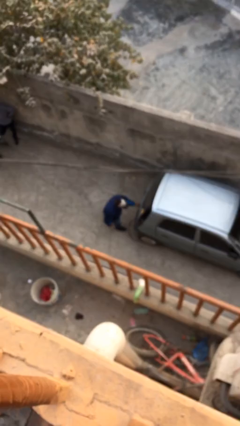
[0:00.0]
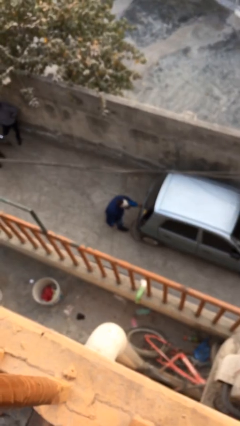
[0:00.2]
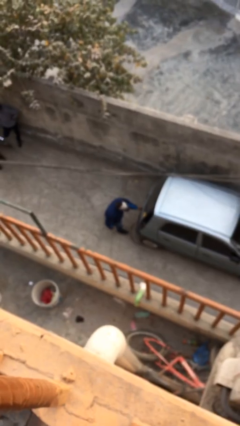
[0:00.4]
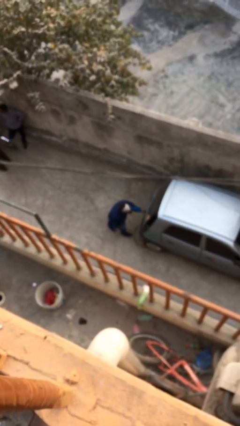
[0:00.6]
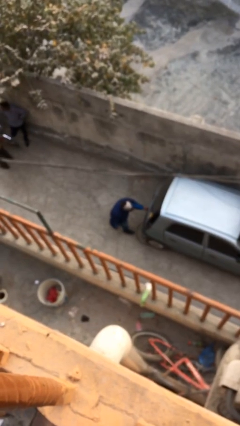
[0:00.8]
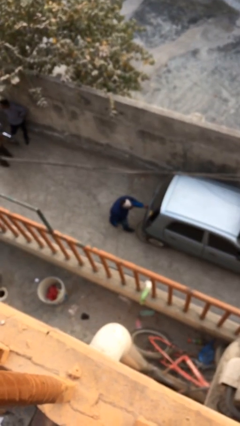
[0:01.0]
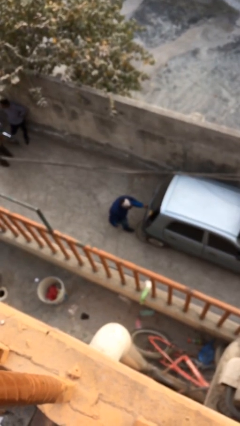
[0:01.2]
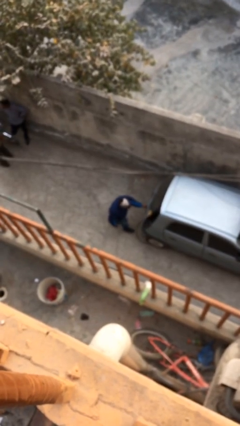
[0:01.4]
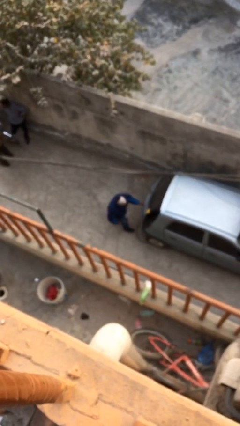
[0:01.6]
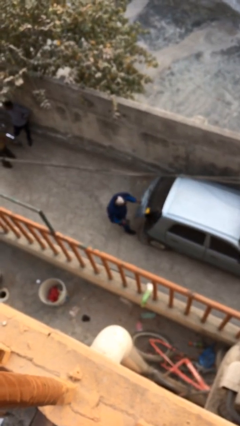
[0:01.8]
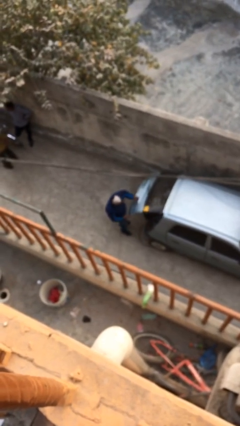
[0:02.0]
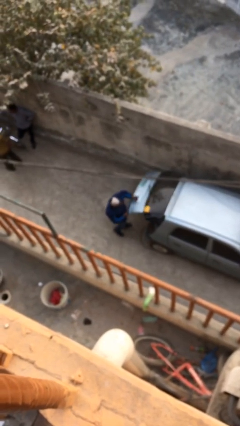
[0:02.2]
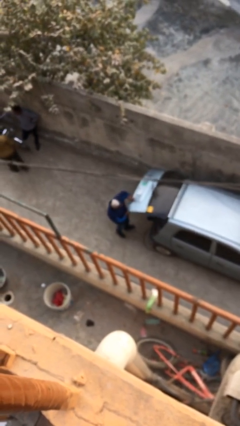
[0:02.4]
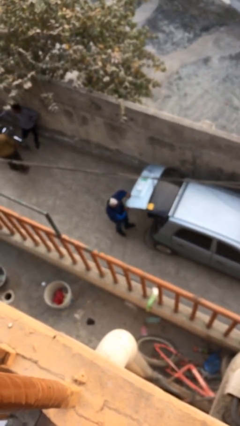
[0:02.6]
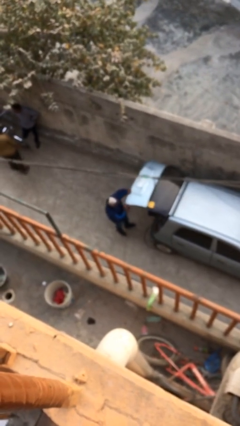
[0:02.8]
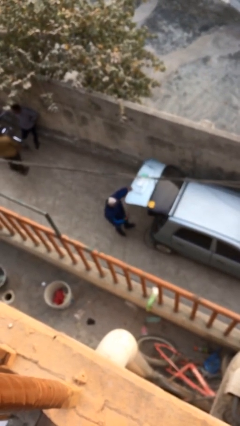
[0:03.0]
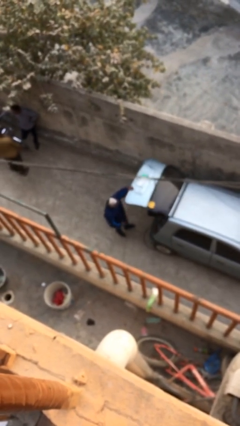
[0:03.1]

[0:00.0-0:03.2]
person opens car trunk

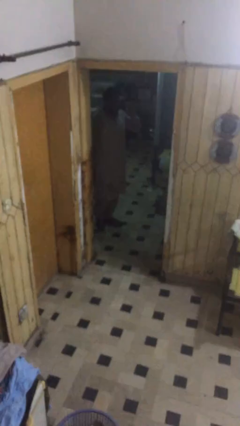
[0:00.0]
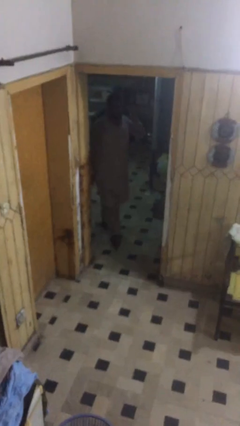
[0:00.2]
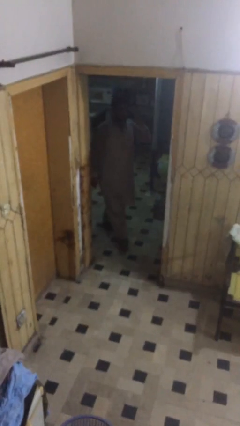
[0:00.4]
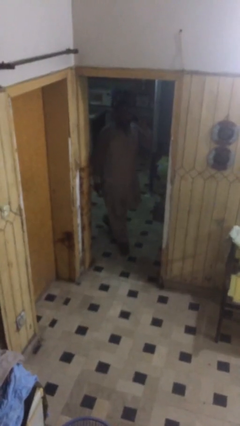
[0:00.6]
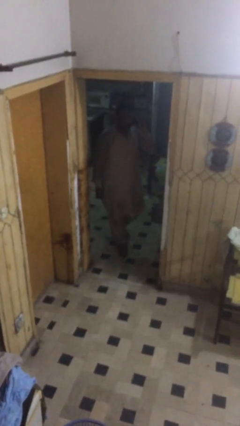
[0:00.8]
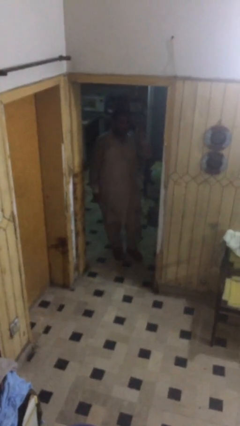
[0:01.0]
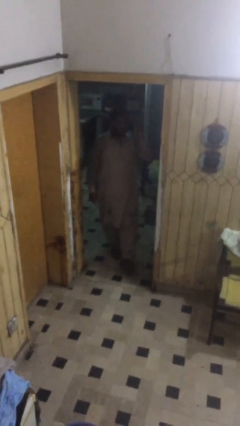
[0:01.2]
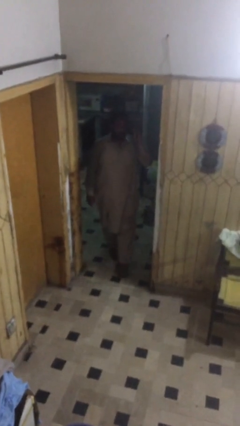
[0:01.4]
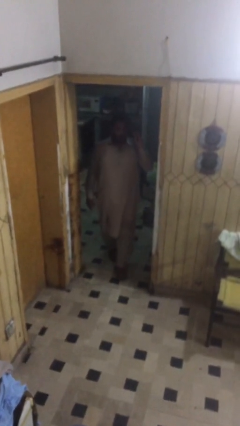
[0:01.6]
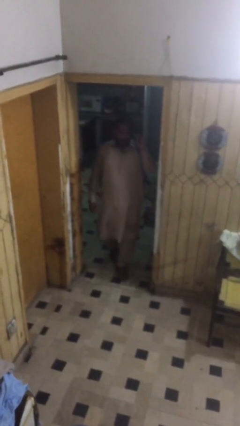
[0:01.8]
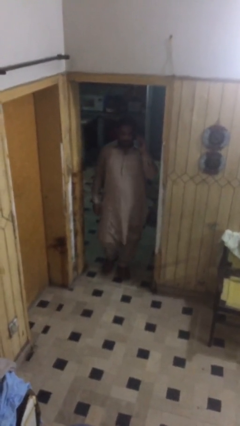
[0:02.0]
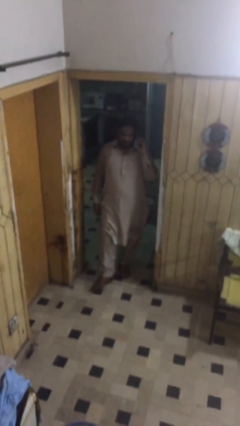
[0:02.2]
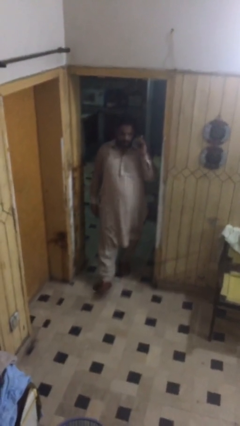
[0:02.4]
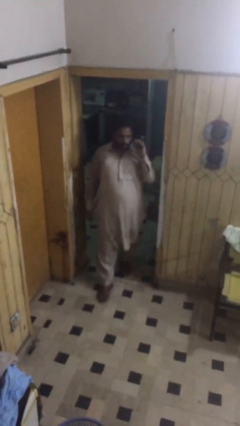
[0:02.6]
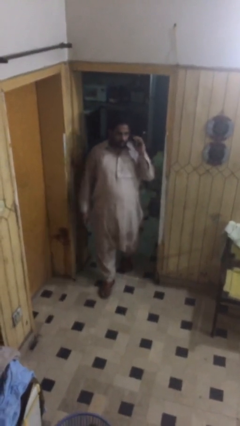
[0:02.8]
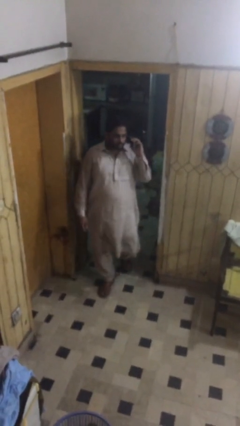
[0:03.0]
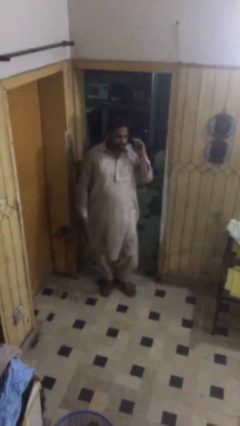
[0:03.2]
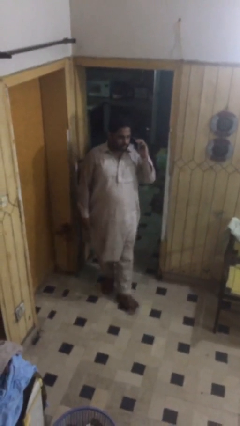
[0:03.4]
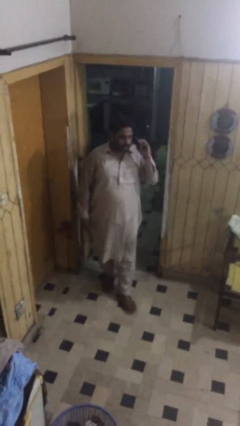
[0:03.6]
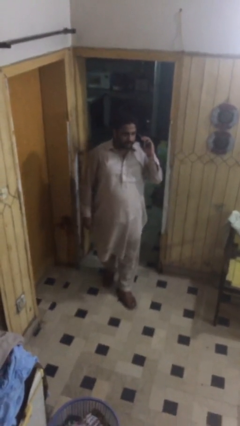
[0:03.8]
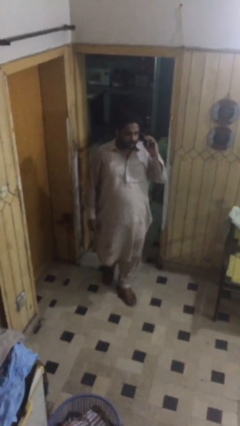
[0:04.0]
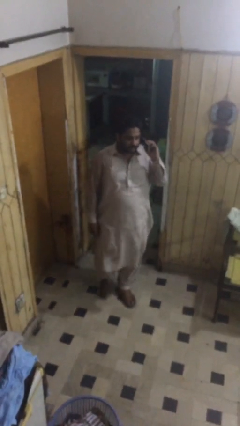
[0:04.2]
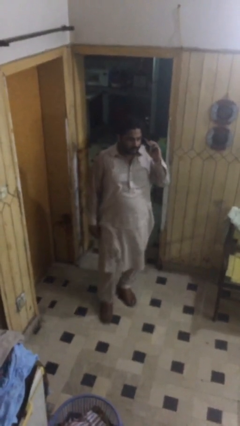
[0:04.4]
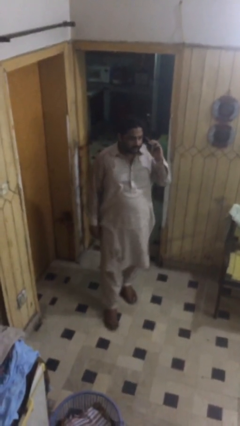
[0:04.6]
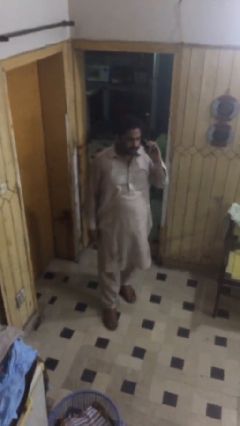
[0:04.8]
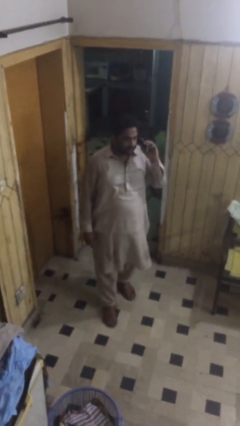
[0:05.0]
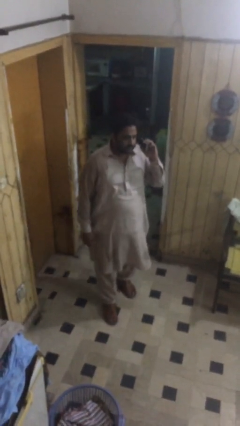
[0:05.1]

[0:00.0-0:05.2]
person enters scene through structure

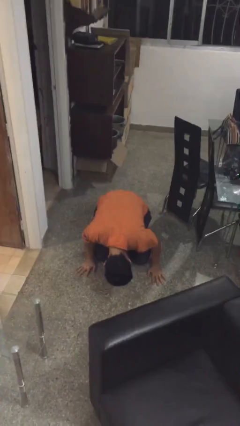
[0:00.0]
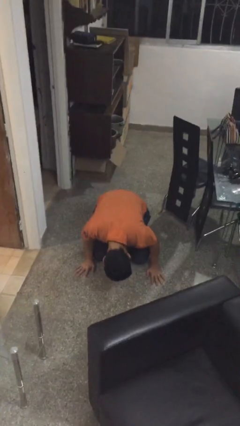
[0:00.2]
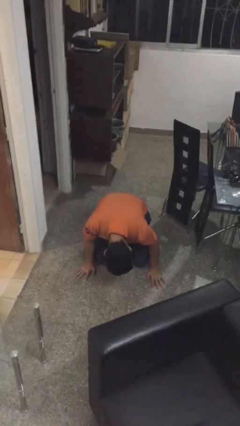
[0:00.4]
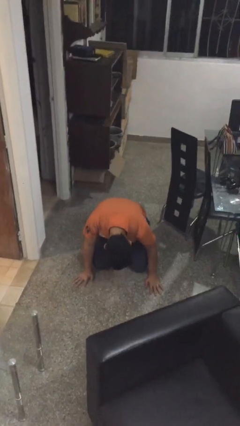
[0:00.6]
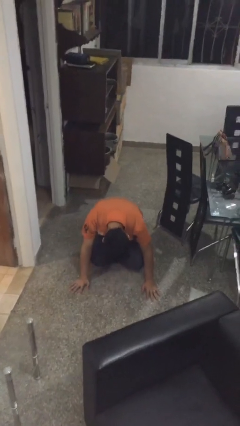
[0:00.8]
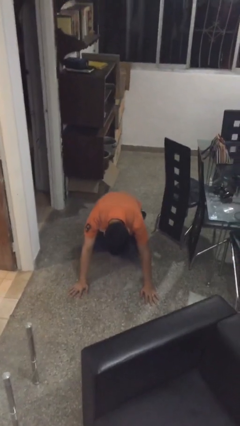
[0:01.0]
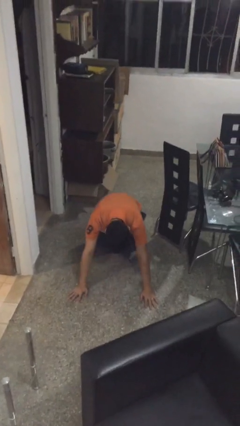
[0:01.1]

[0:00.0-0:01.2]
person lies down on floor

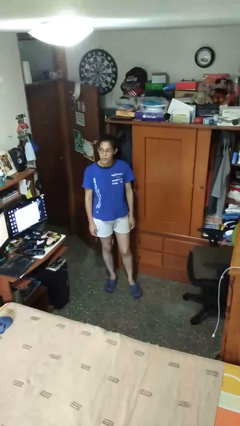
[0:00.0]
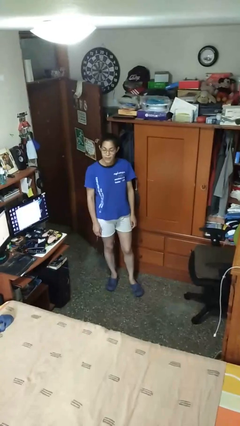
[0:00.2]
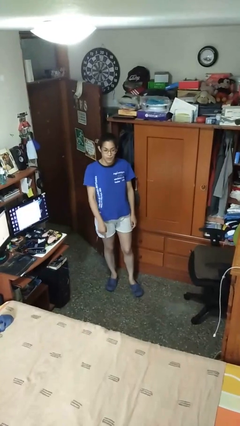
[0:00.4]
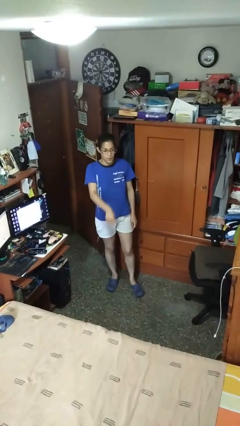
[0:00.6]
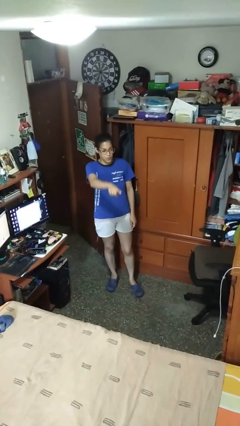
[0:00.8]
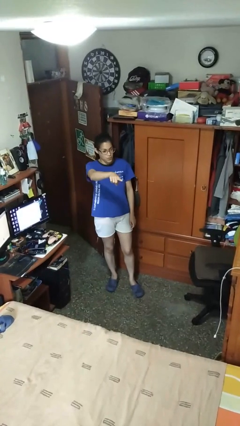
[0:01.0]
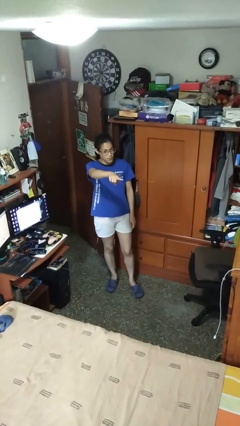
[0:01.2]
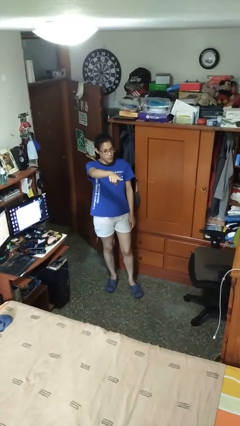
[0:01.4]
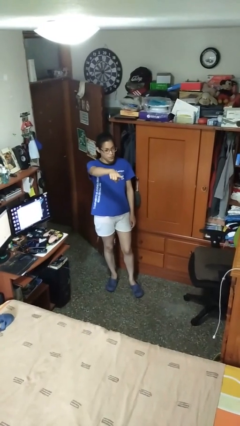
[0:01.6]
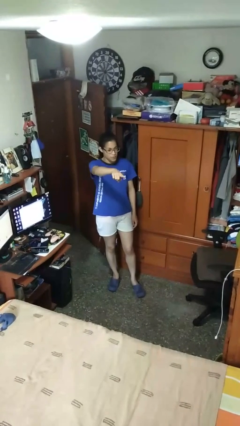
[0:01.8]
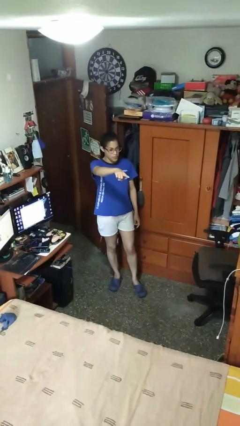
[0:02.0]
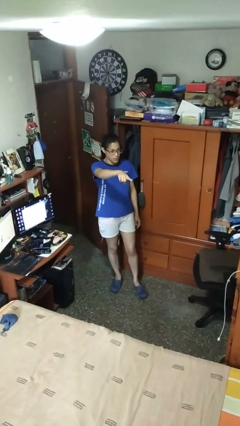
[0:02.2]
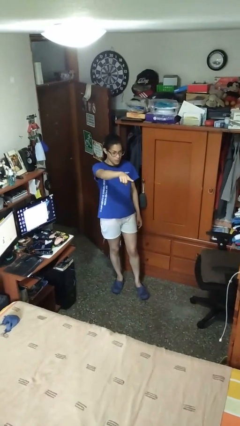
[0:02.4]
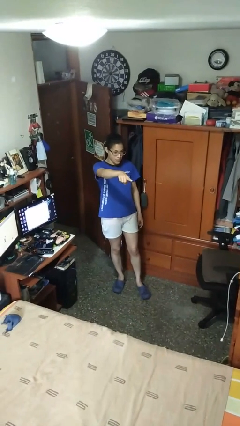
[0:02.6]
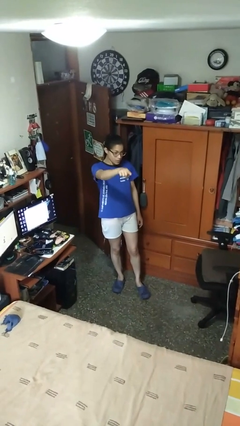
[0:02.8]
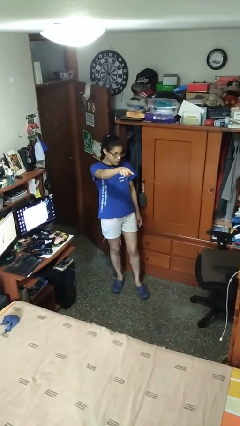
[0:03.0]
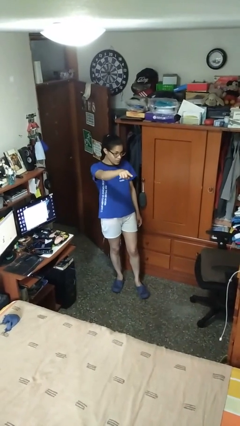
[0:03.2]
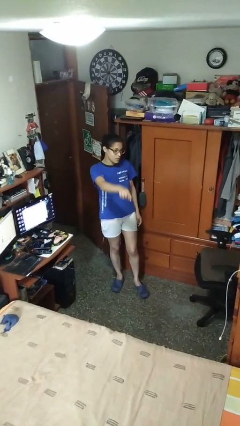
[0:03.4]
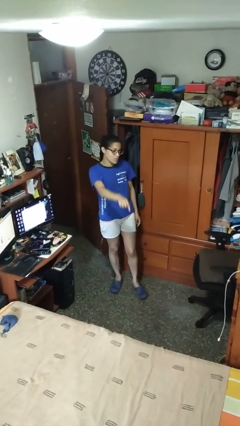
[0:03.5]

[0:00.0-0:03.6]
person points at person

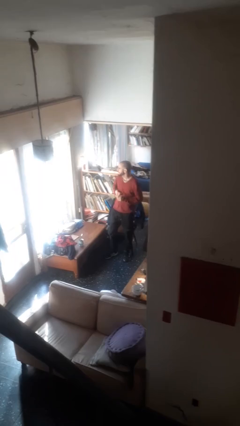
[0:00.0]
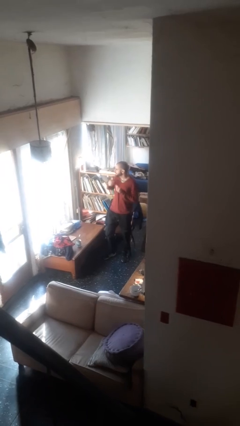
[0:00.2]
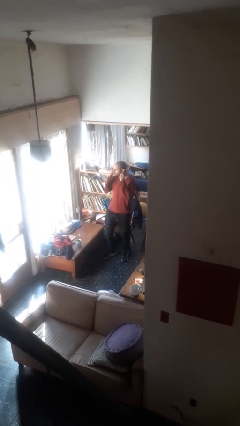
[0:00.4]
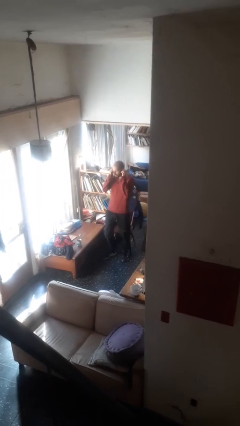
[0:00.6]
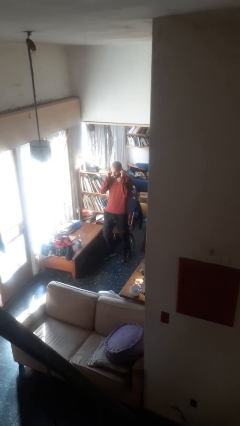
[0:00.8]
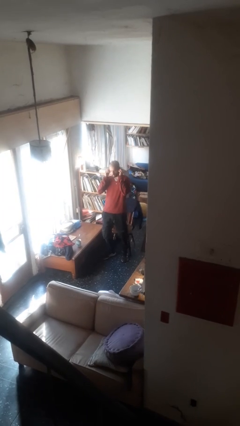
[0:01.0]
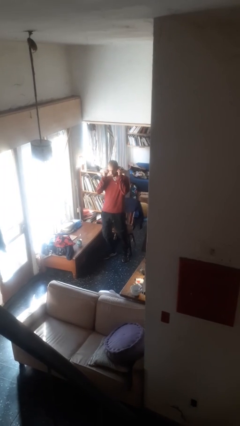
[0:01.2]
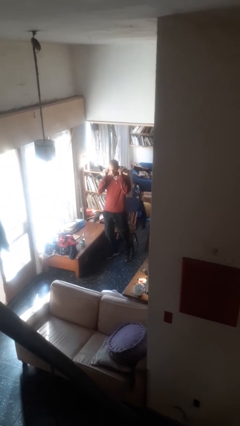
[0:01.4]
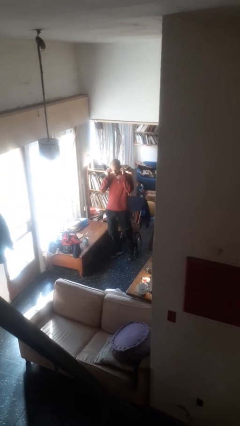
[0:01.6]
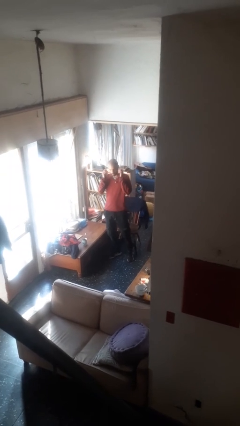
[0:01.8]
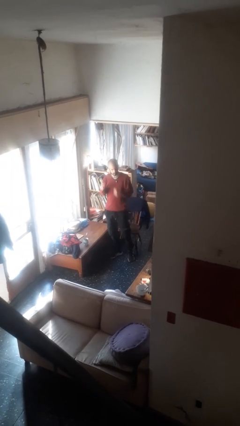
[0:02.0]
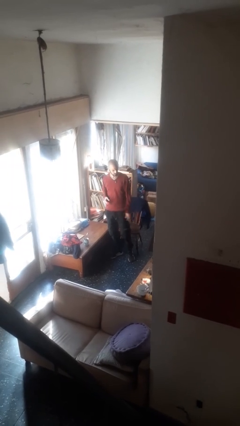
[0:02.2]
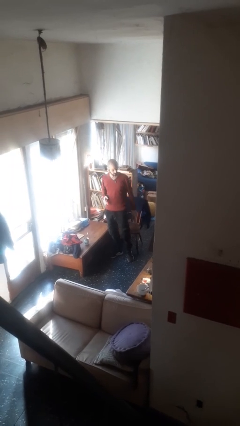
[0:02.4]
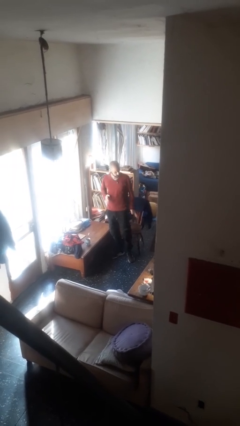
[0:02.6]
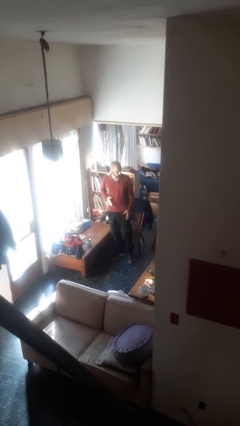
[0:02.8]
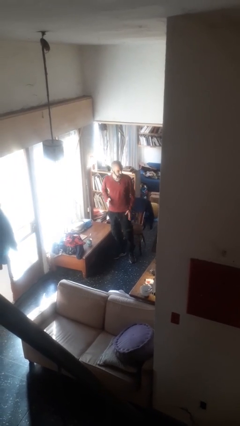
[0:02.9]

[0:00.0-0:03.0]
person puts on headphones

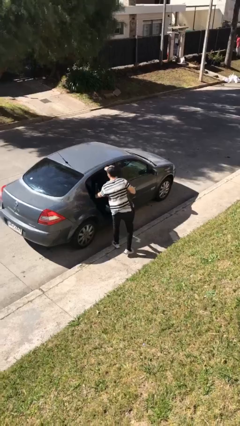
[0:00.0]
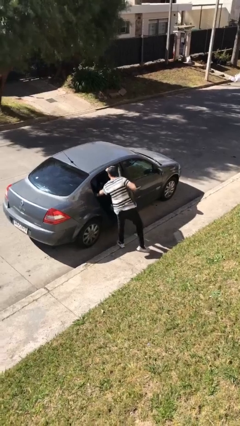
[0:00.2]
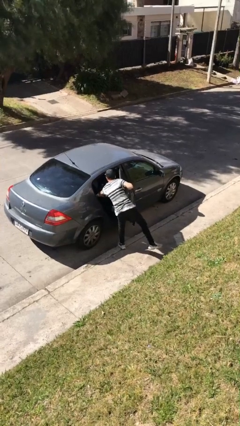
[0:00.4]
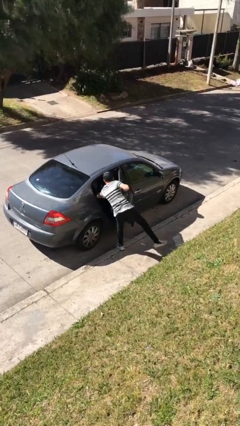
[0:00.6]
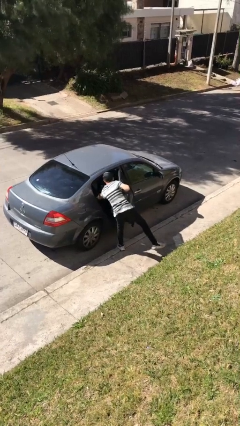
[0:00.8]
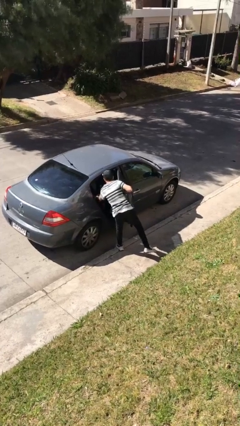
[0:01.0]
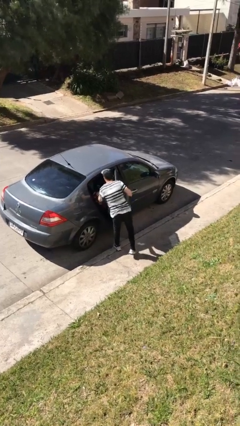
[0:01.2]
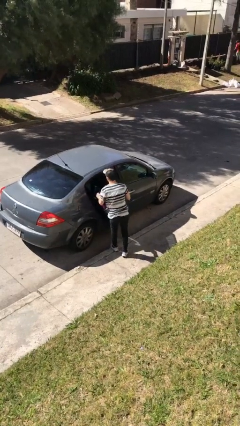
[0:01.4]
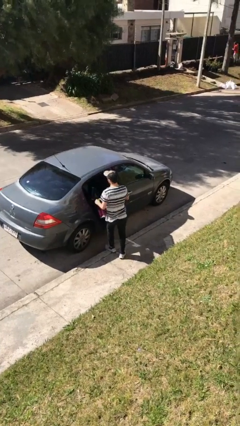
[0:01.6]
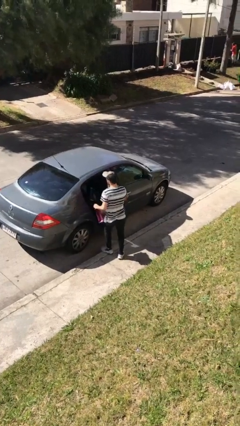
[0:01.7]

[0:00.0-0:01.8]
person unloads car
